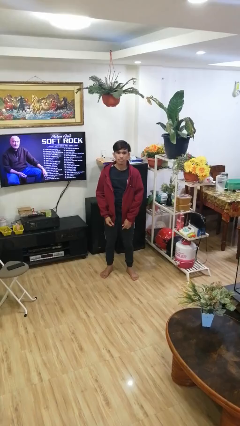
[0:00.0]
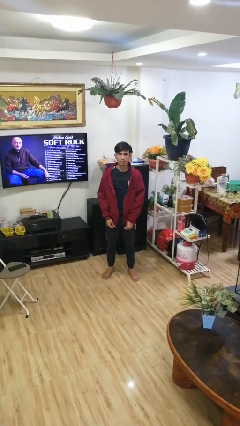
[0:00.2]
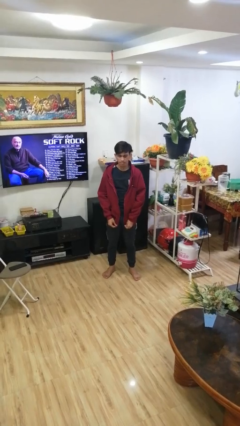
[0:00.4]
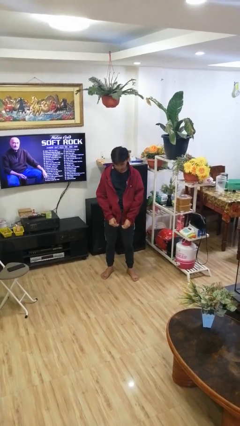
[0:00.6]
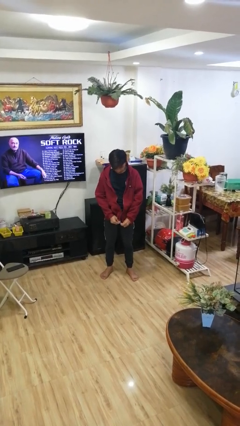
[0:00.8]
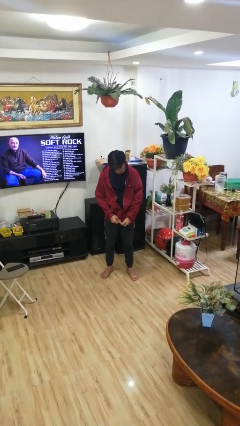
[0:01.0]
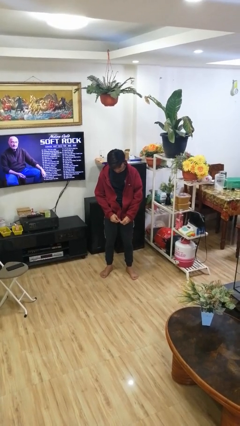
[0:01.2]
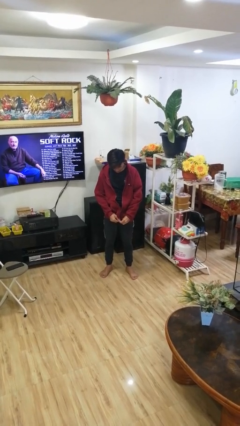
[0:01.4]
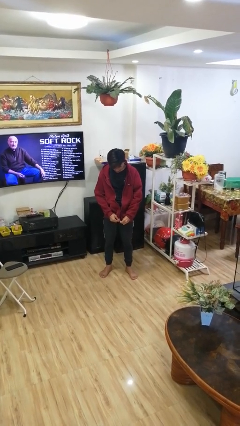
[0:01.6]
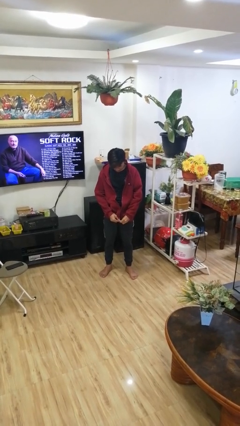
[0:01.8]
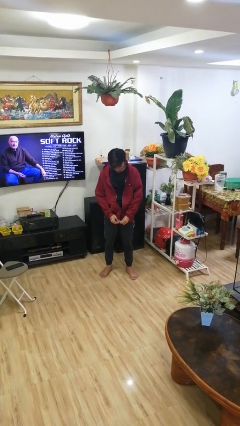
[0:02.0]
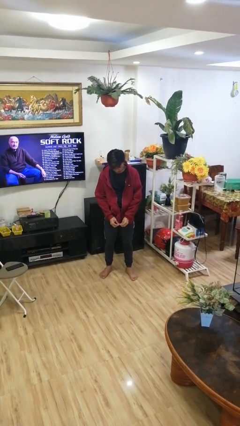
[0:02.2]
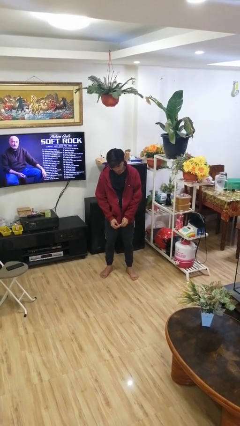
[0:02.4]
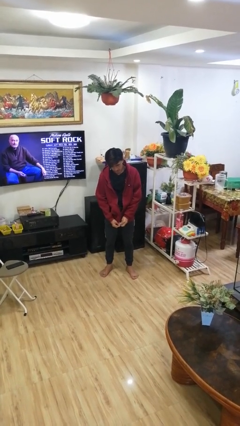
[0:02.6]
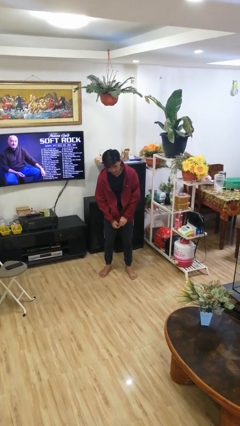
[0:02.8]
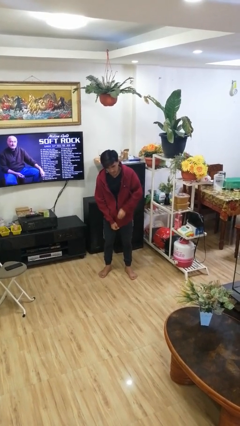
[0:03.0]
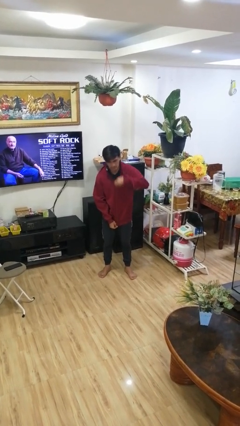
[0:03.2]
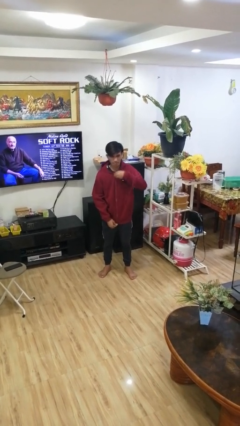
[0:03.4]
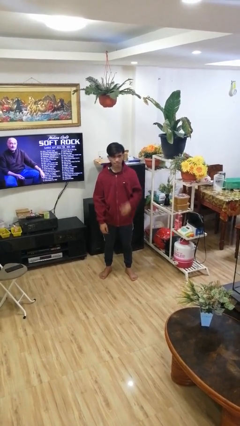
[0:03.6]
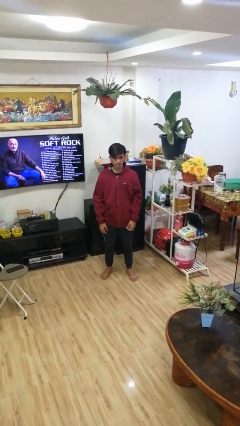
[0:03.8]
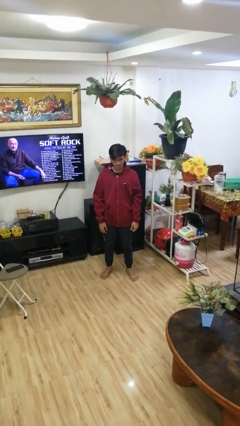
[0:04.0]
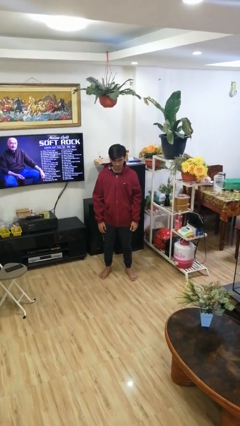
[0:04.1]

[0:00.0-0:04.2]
person zips up jacket

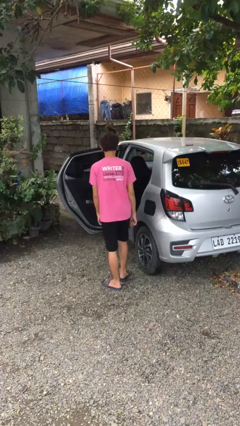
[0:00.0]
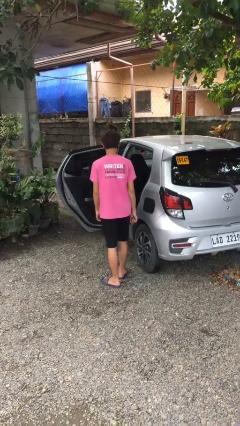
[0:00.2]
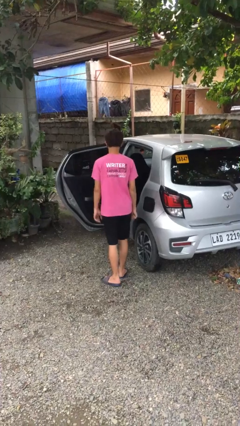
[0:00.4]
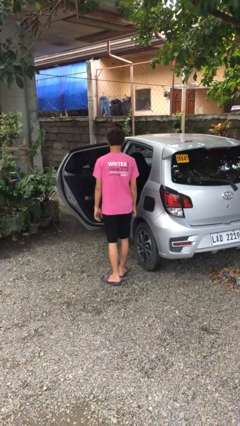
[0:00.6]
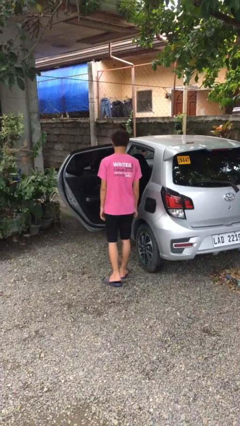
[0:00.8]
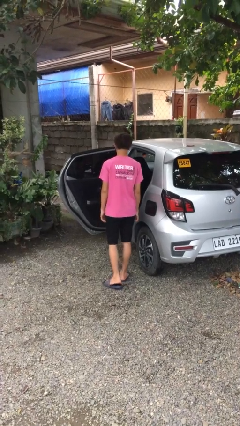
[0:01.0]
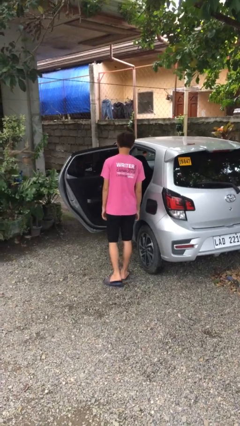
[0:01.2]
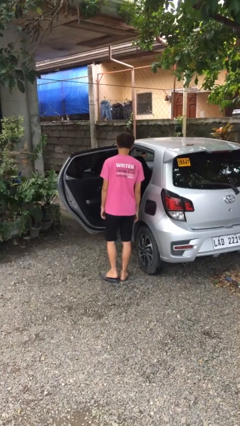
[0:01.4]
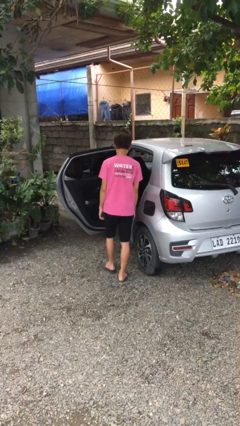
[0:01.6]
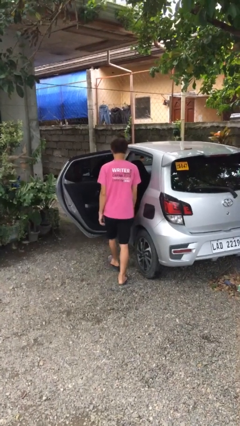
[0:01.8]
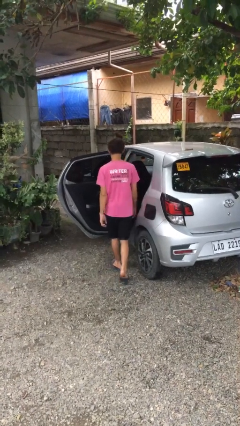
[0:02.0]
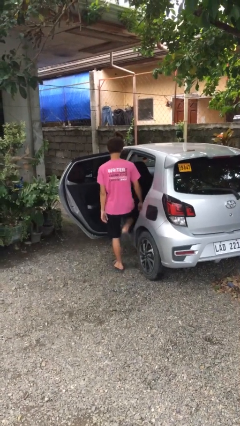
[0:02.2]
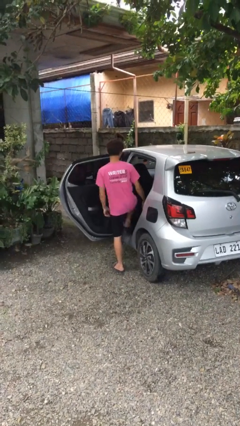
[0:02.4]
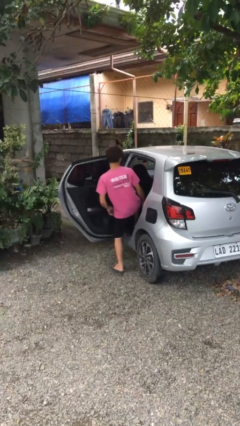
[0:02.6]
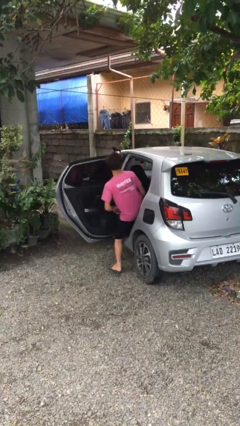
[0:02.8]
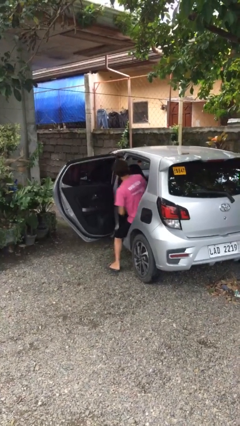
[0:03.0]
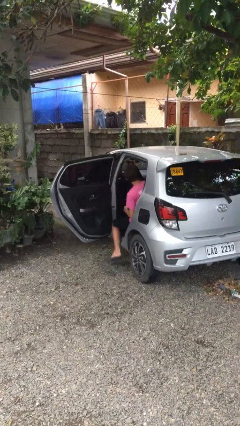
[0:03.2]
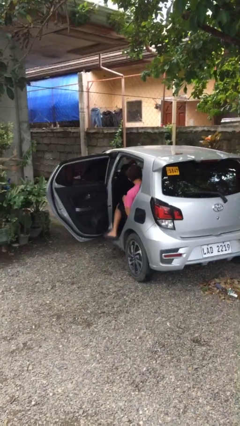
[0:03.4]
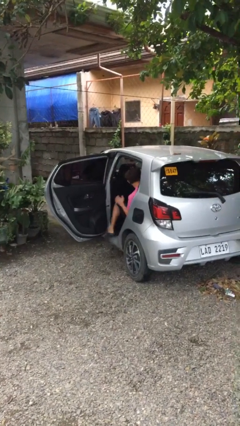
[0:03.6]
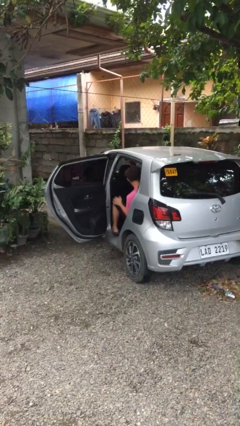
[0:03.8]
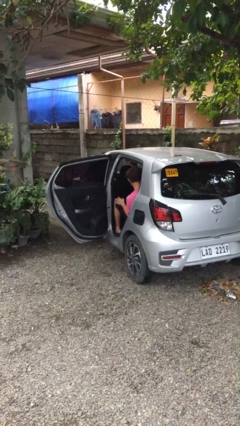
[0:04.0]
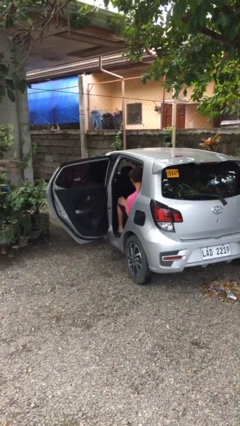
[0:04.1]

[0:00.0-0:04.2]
person enters car

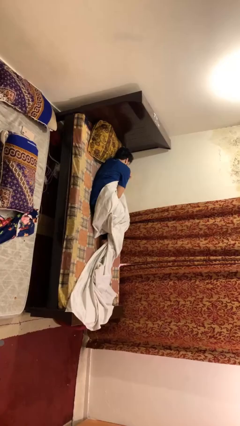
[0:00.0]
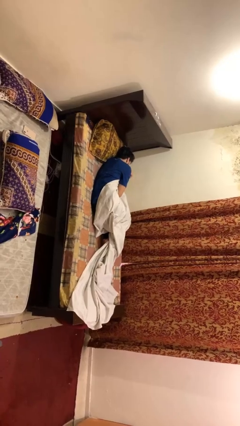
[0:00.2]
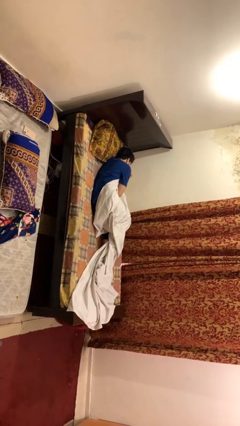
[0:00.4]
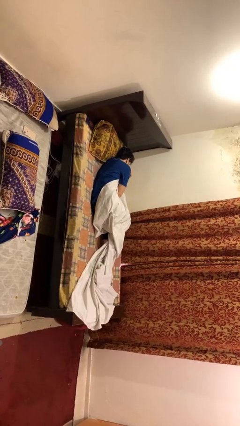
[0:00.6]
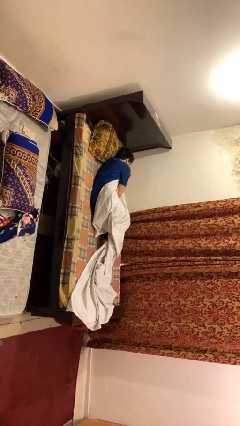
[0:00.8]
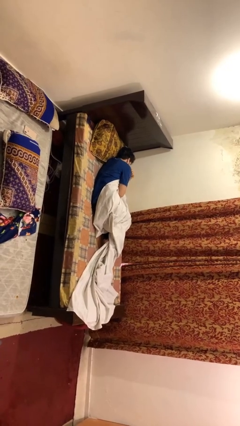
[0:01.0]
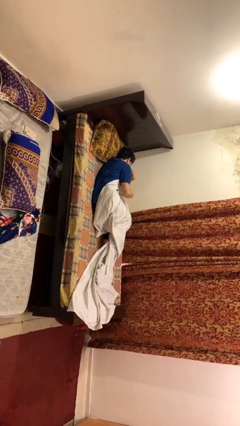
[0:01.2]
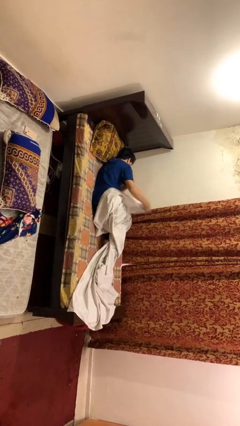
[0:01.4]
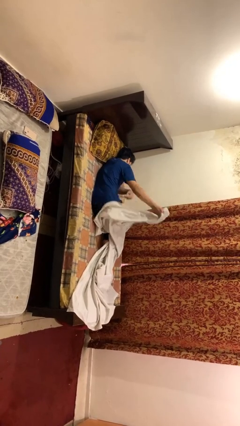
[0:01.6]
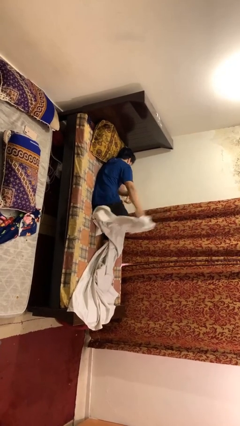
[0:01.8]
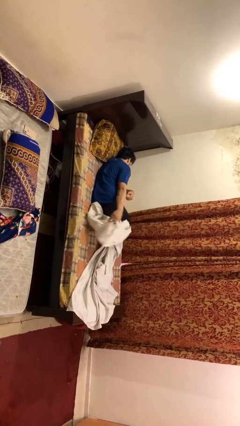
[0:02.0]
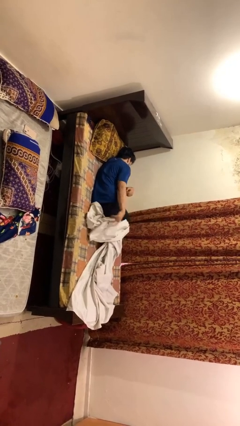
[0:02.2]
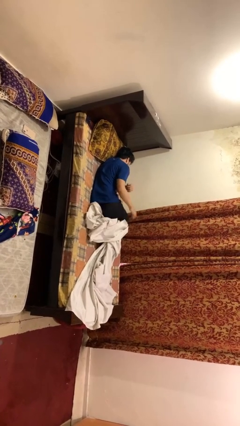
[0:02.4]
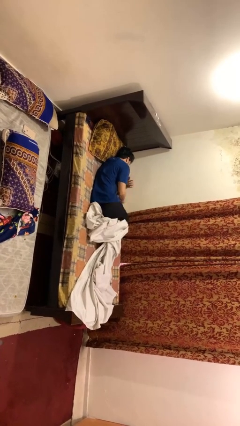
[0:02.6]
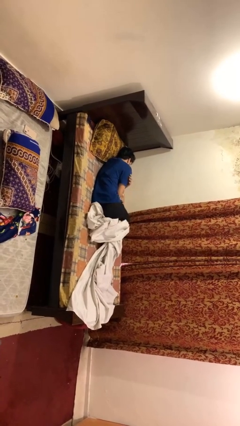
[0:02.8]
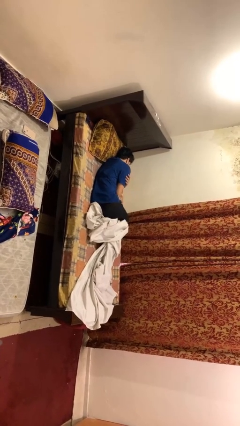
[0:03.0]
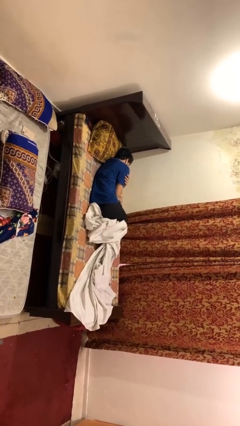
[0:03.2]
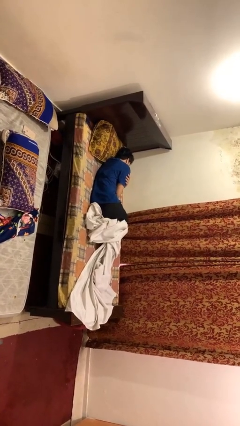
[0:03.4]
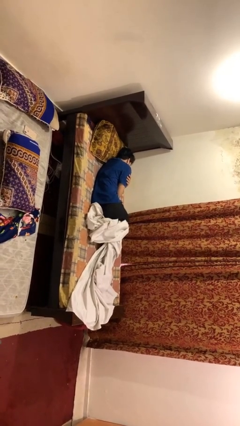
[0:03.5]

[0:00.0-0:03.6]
person uncovers with bedsheets

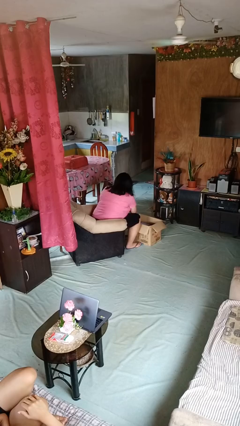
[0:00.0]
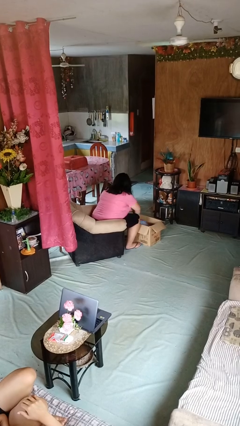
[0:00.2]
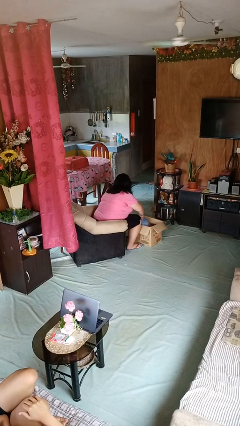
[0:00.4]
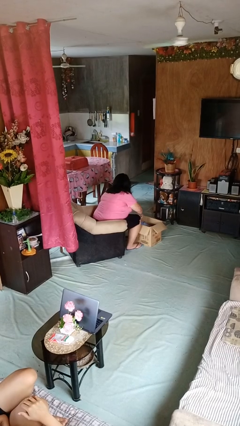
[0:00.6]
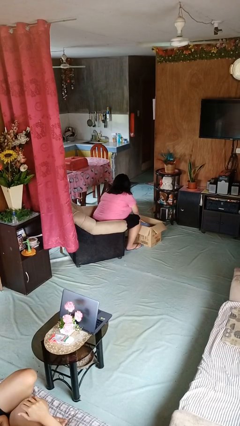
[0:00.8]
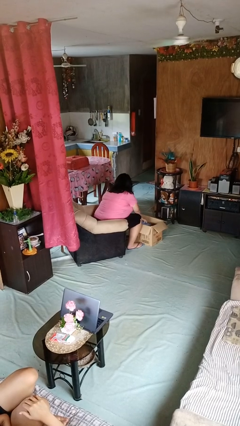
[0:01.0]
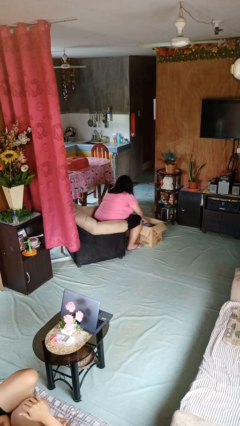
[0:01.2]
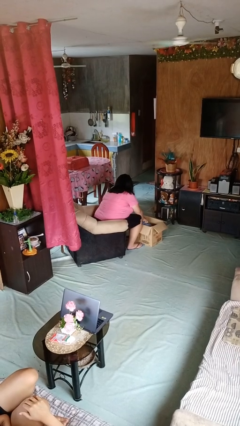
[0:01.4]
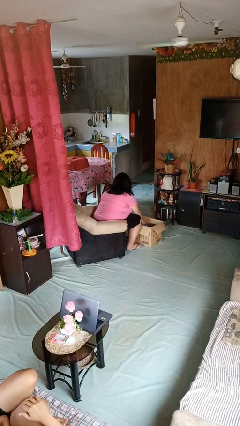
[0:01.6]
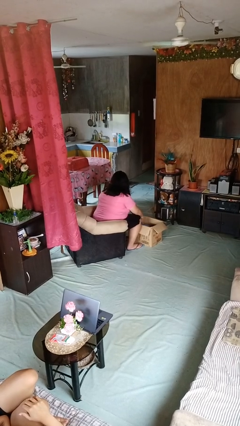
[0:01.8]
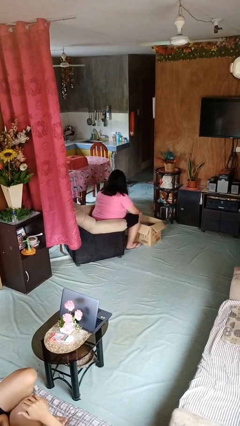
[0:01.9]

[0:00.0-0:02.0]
person searches in box

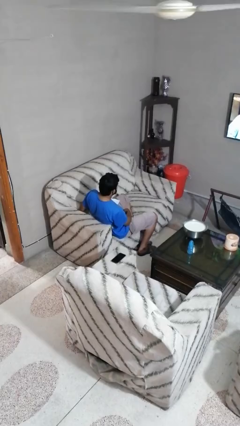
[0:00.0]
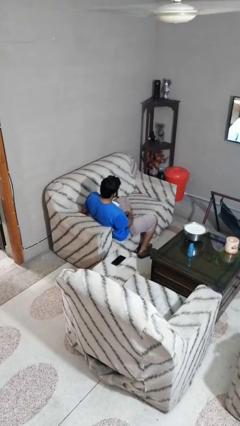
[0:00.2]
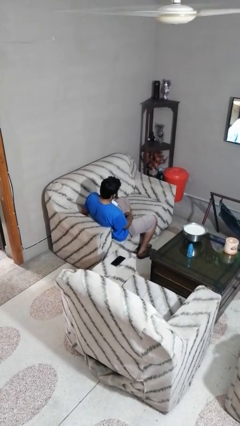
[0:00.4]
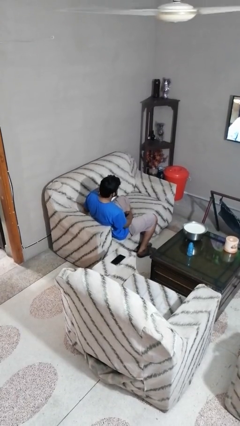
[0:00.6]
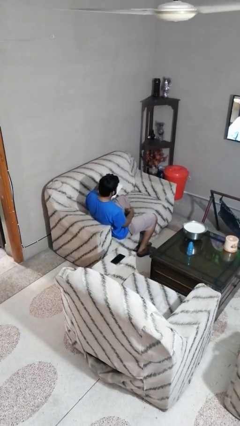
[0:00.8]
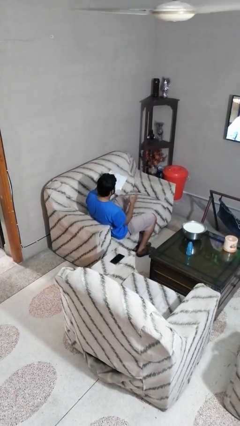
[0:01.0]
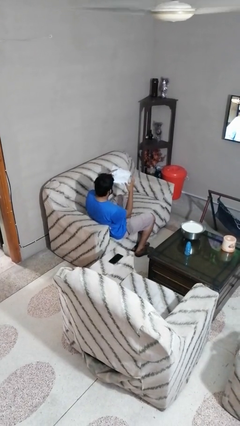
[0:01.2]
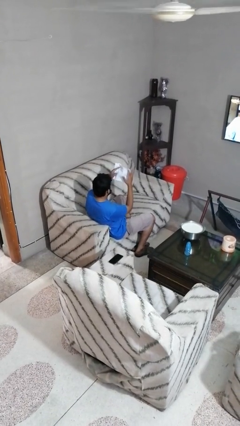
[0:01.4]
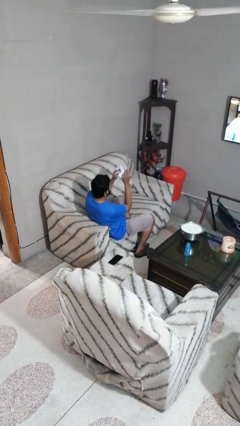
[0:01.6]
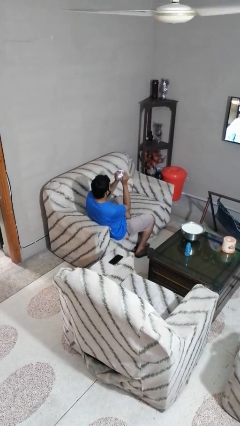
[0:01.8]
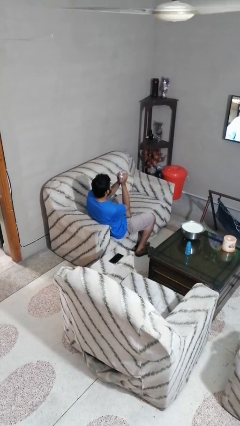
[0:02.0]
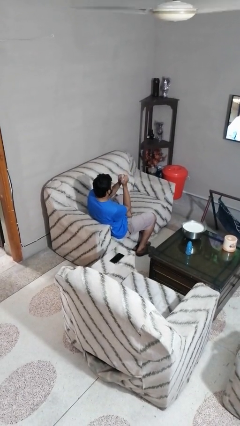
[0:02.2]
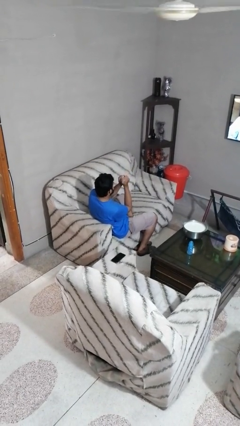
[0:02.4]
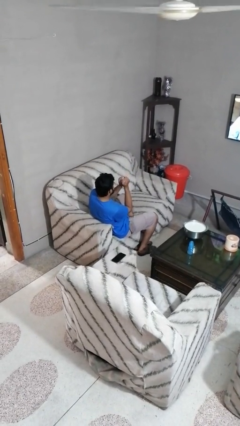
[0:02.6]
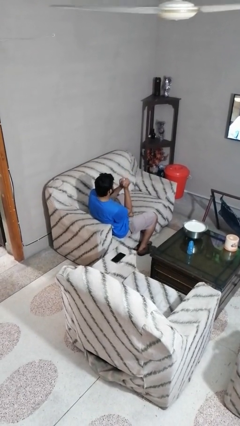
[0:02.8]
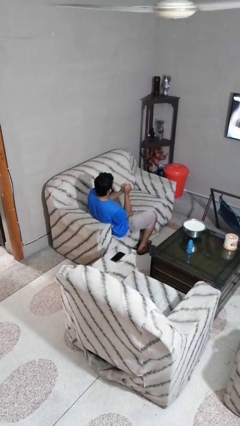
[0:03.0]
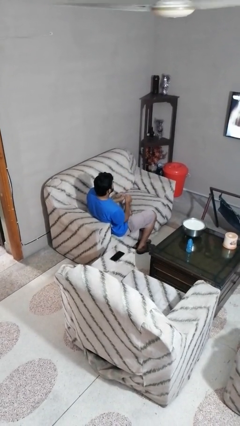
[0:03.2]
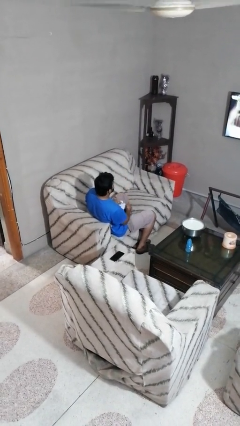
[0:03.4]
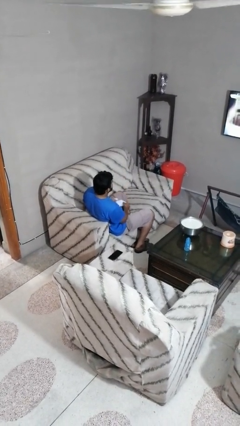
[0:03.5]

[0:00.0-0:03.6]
person crumples paper
